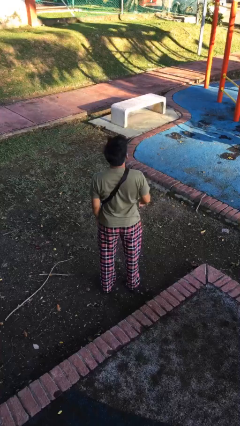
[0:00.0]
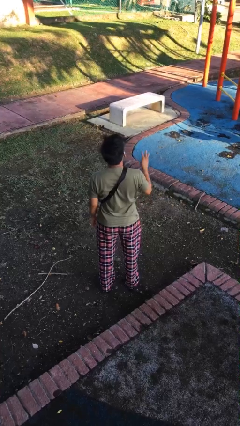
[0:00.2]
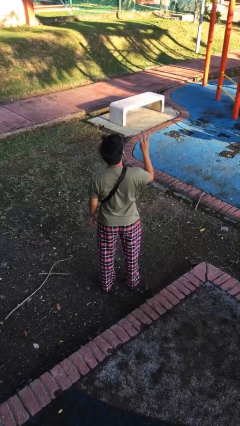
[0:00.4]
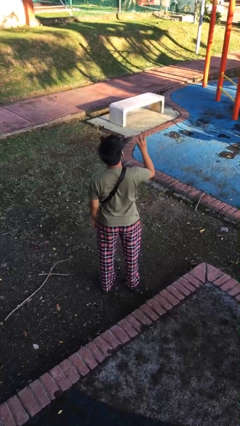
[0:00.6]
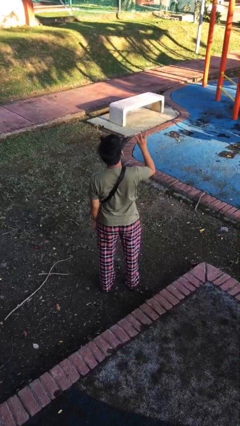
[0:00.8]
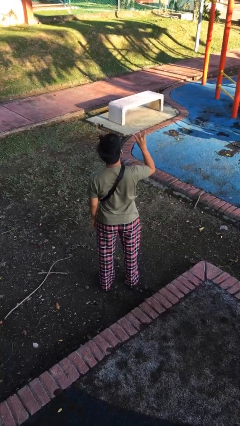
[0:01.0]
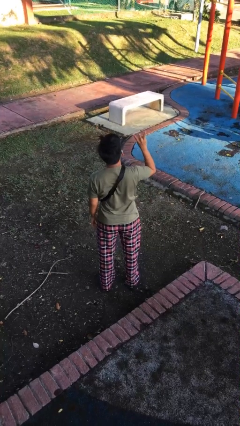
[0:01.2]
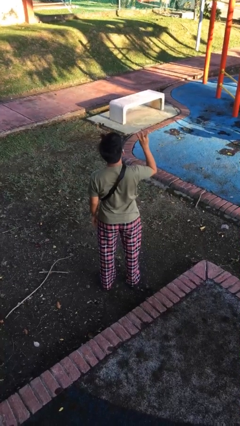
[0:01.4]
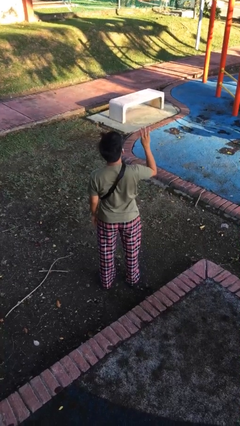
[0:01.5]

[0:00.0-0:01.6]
person gestures number three

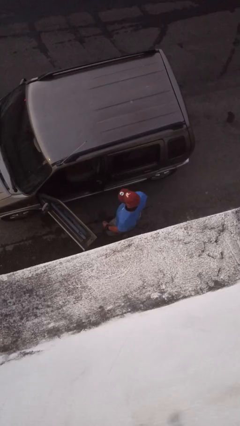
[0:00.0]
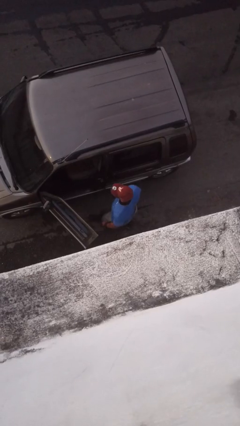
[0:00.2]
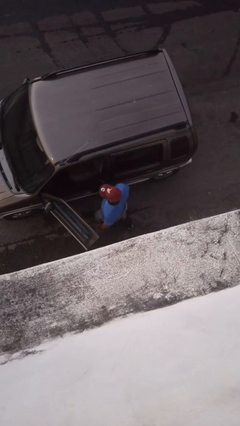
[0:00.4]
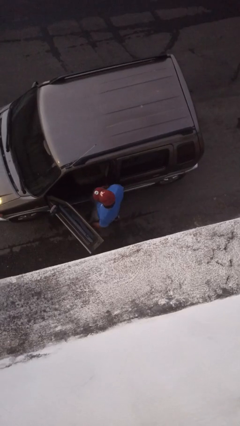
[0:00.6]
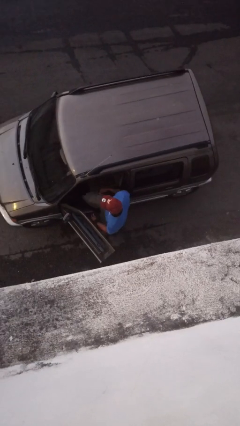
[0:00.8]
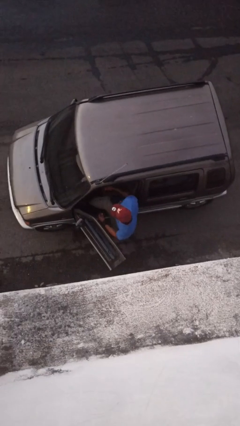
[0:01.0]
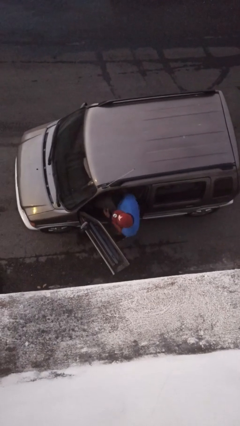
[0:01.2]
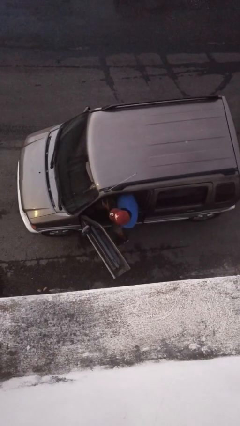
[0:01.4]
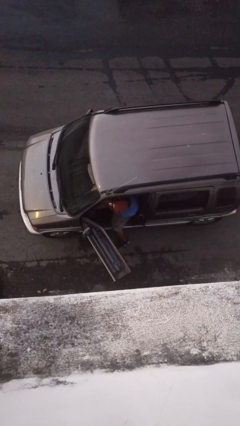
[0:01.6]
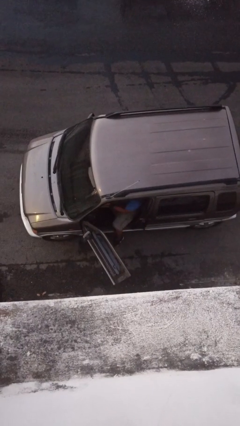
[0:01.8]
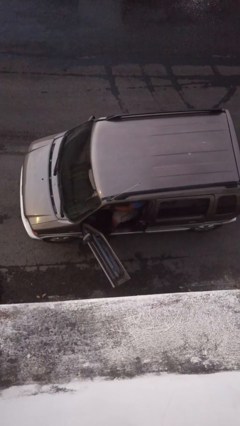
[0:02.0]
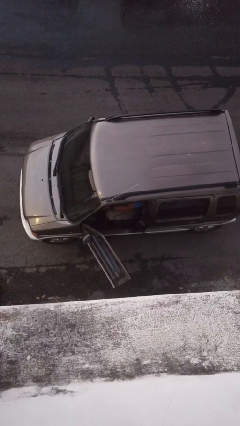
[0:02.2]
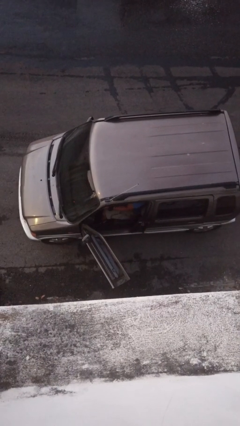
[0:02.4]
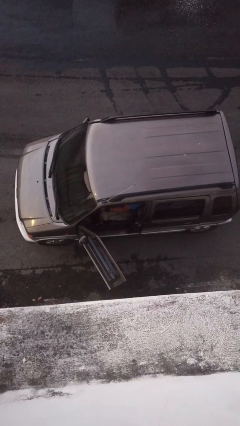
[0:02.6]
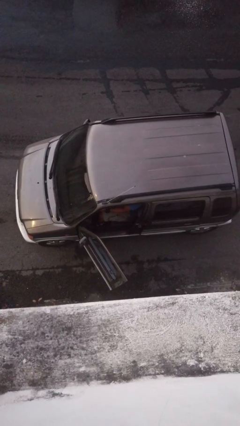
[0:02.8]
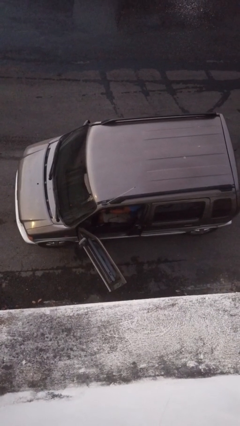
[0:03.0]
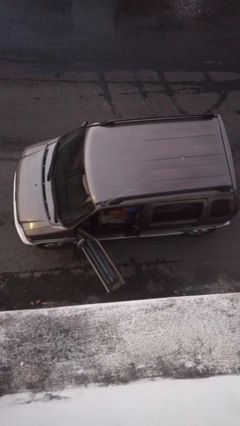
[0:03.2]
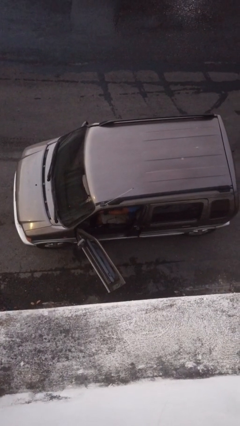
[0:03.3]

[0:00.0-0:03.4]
person enters car

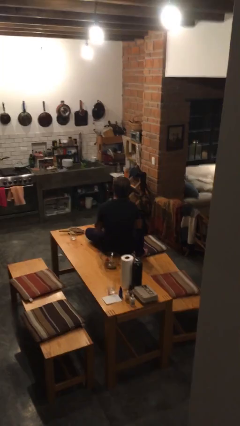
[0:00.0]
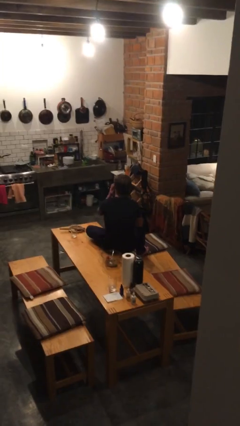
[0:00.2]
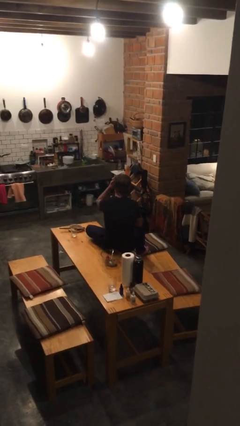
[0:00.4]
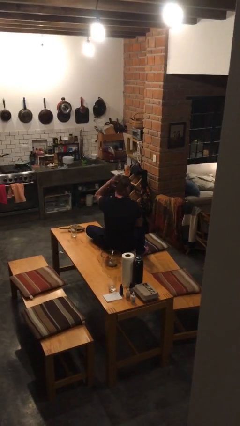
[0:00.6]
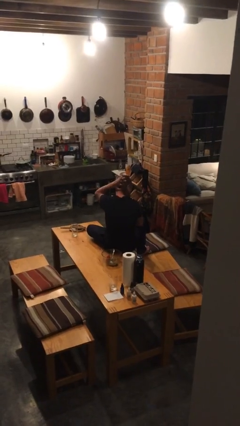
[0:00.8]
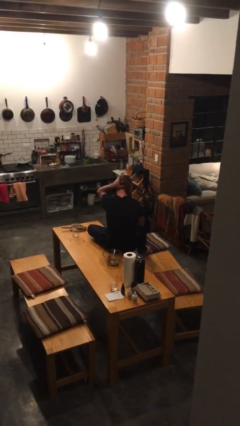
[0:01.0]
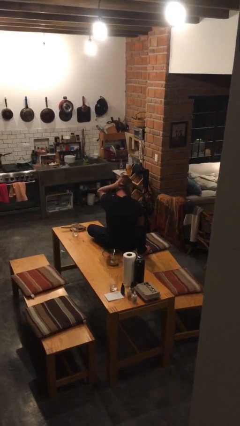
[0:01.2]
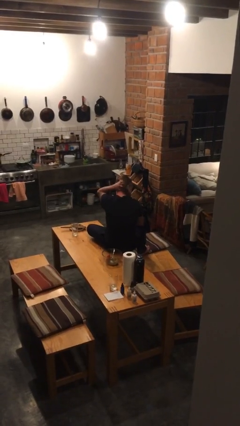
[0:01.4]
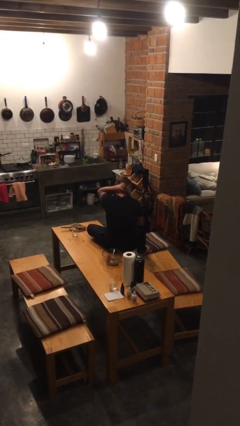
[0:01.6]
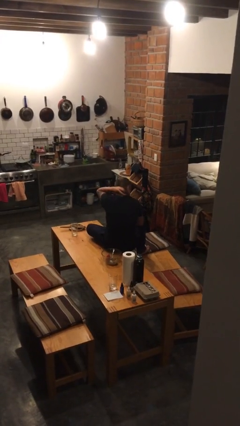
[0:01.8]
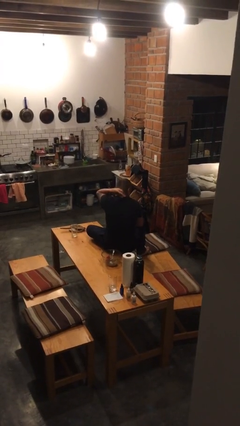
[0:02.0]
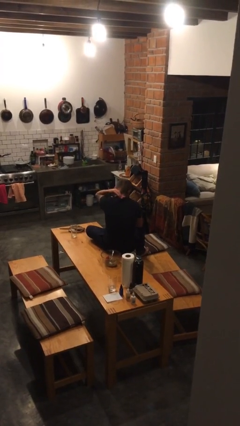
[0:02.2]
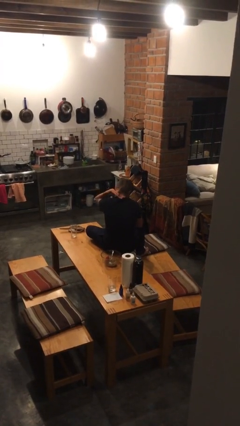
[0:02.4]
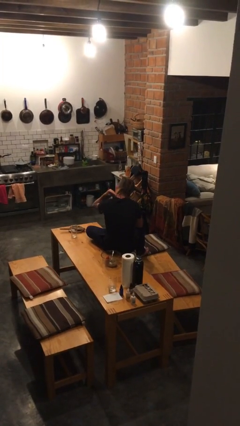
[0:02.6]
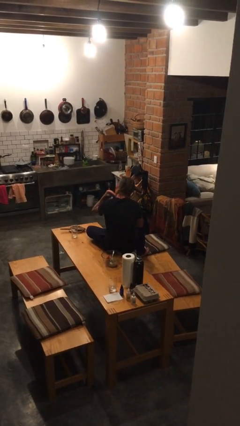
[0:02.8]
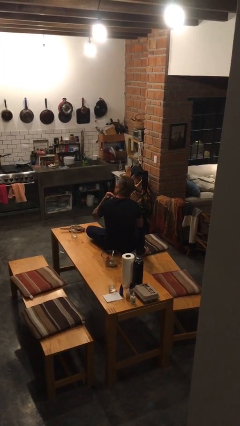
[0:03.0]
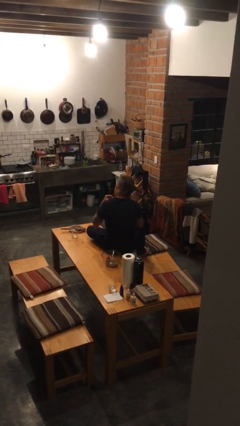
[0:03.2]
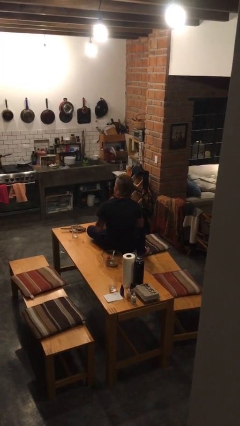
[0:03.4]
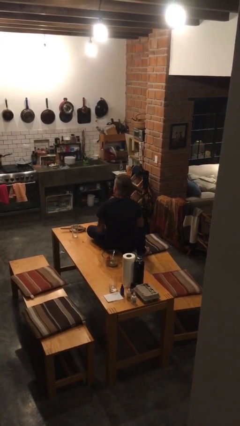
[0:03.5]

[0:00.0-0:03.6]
person strokes hair

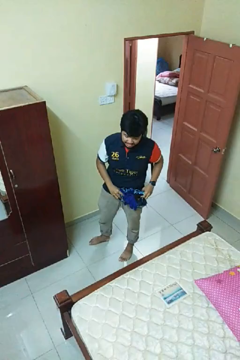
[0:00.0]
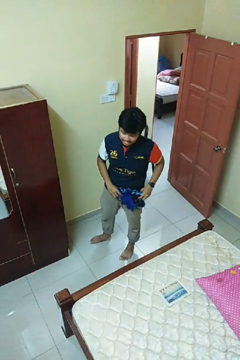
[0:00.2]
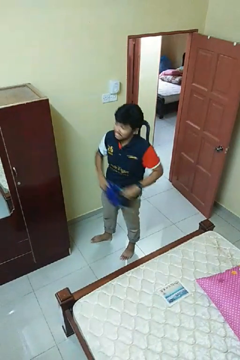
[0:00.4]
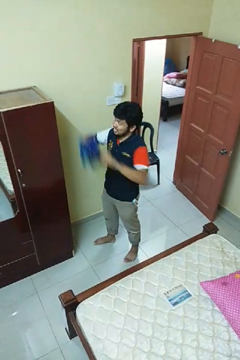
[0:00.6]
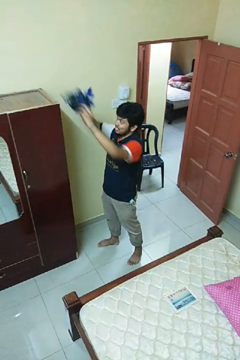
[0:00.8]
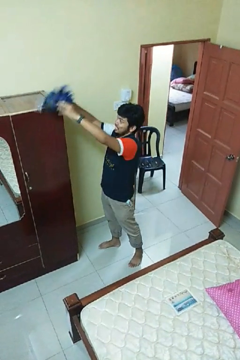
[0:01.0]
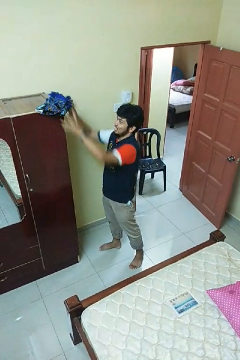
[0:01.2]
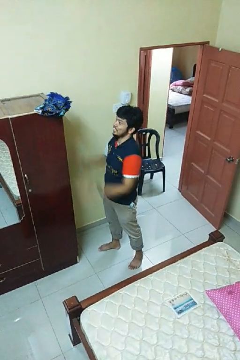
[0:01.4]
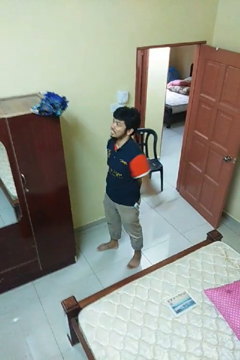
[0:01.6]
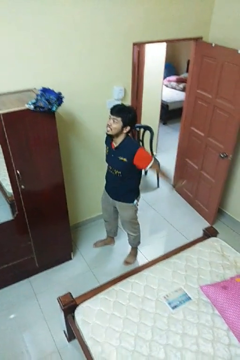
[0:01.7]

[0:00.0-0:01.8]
person puts down object on countertop

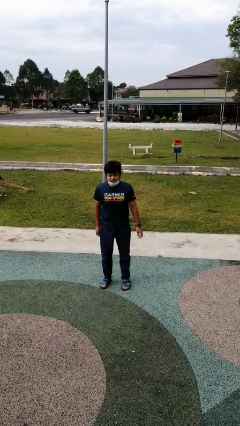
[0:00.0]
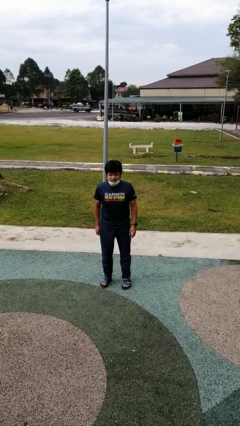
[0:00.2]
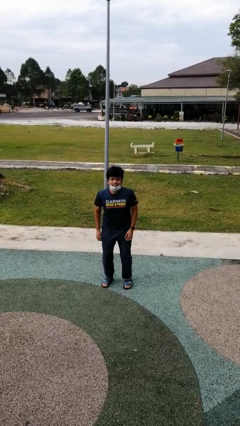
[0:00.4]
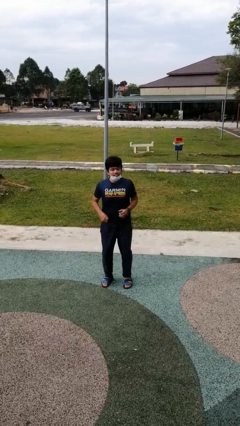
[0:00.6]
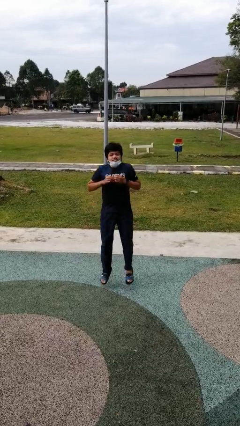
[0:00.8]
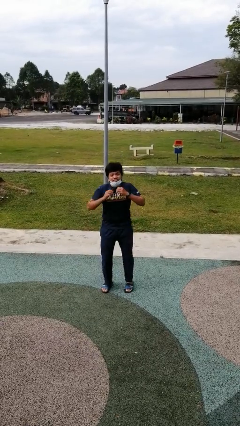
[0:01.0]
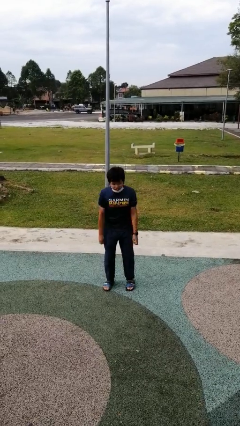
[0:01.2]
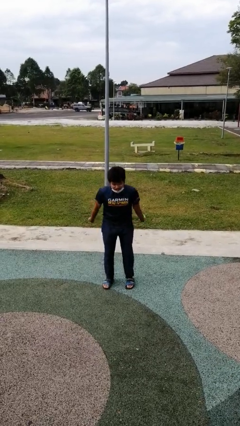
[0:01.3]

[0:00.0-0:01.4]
person jumps

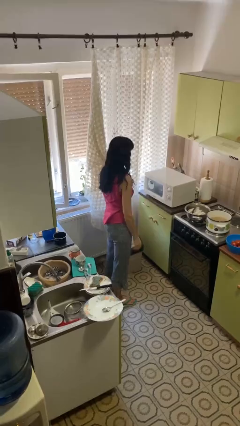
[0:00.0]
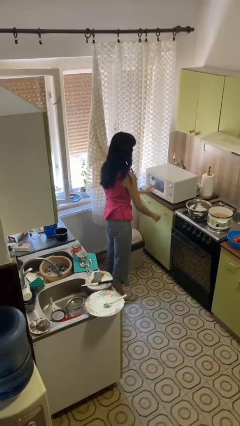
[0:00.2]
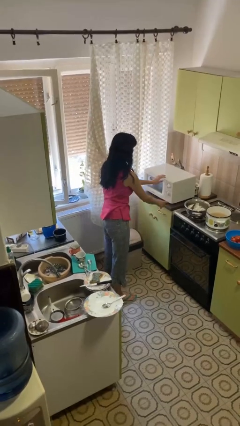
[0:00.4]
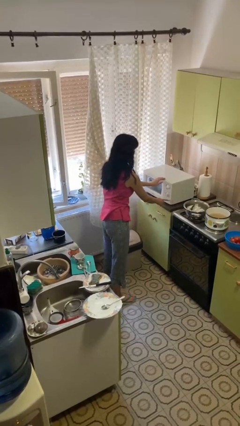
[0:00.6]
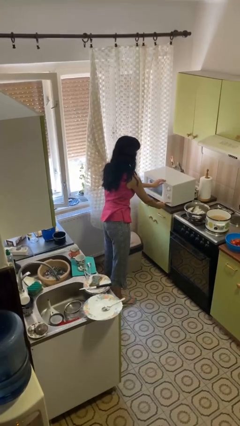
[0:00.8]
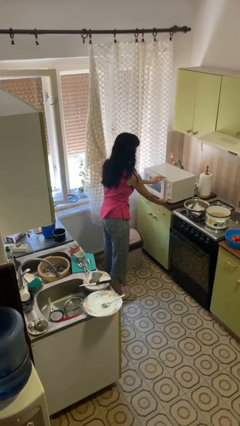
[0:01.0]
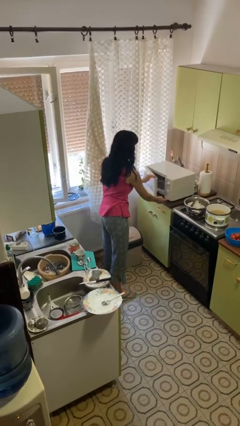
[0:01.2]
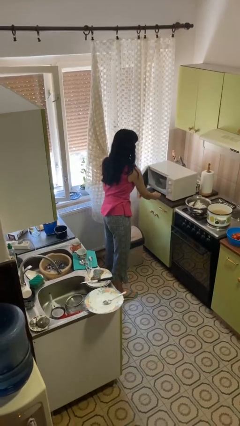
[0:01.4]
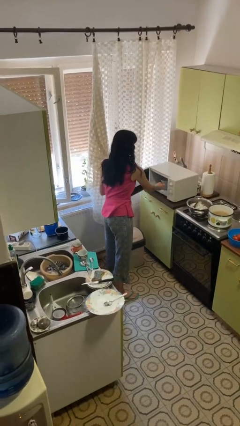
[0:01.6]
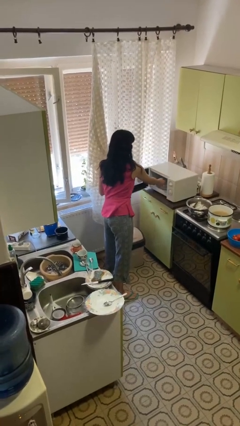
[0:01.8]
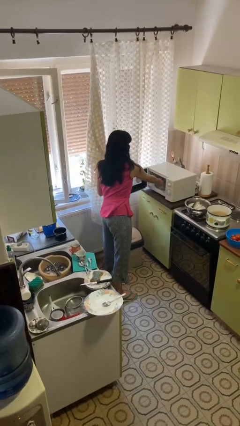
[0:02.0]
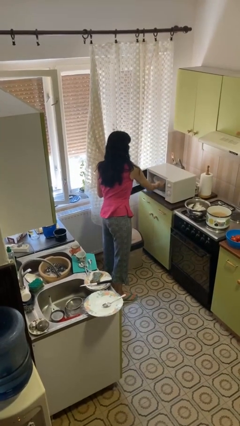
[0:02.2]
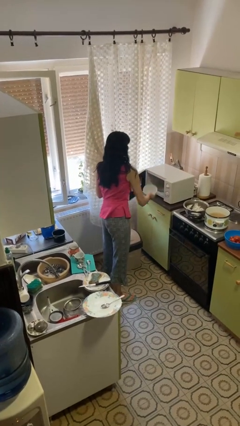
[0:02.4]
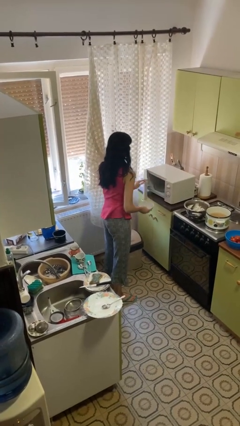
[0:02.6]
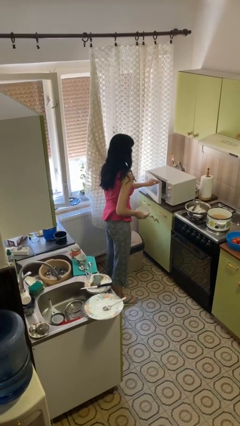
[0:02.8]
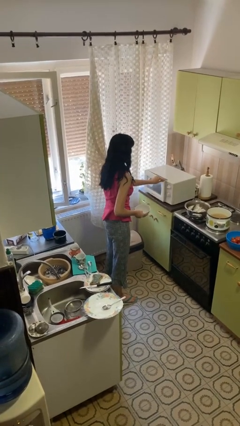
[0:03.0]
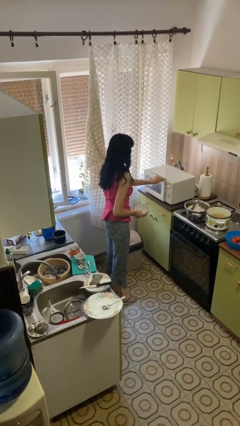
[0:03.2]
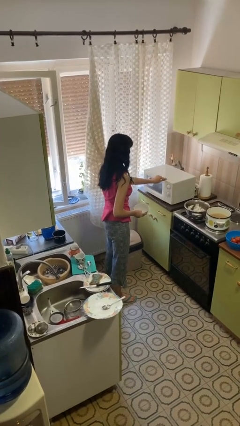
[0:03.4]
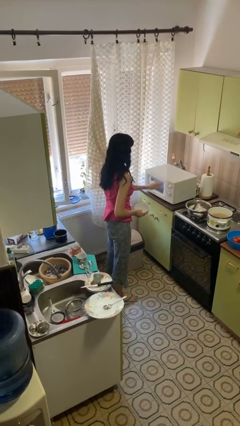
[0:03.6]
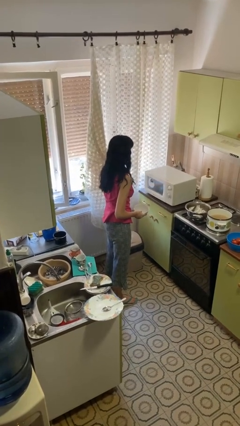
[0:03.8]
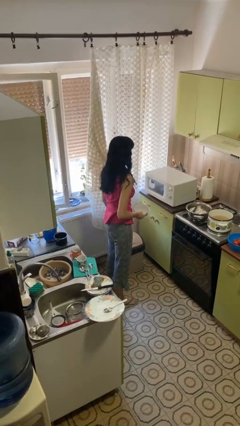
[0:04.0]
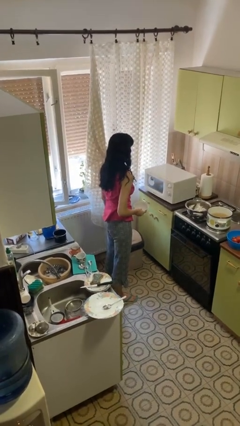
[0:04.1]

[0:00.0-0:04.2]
person takes object from microwave

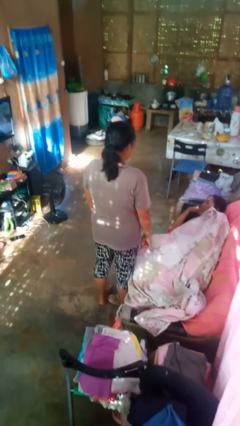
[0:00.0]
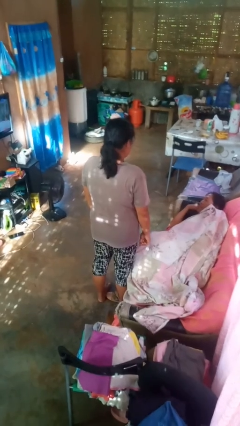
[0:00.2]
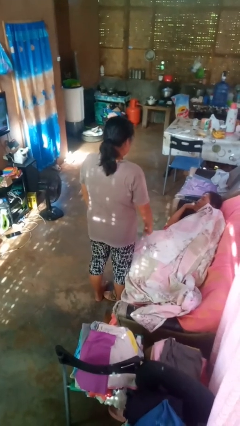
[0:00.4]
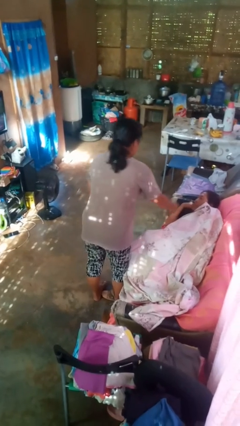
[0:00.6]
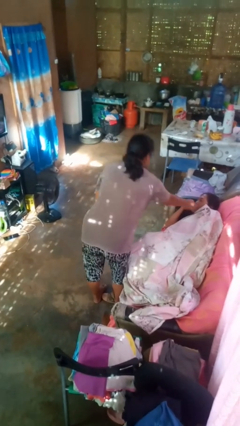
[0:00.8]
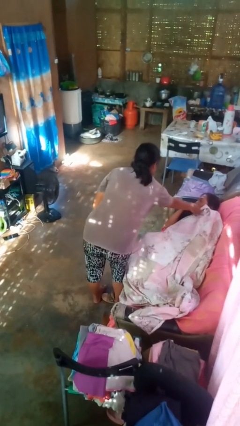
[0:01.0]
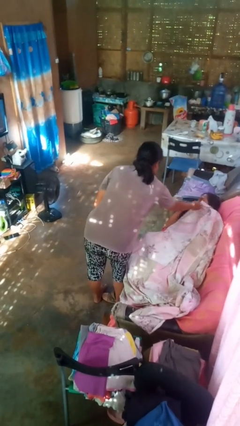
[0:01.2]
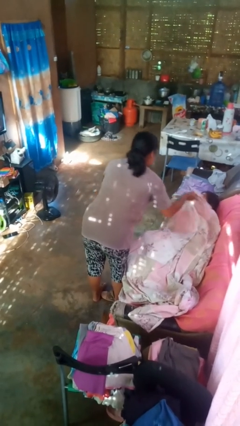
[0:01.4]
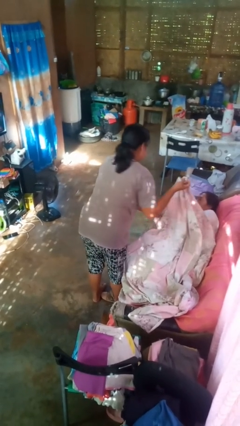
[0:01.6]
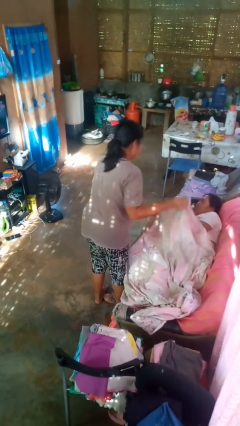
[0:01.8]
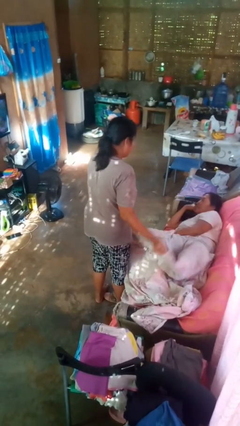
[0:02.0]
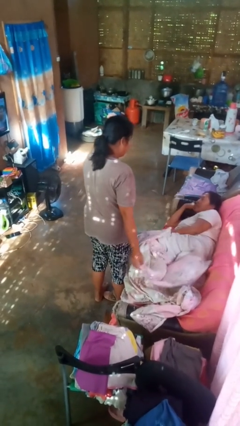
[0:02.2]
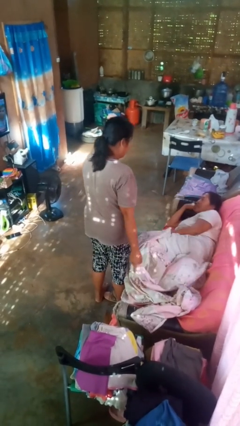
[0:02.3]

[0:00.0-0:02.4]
person uncovers friend with blanket
